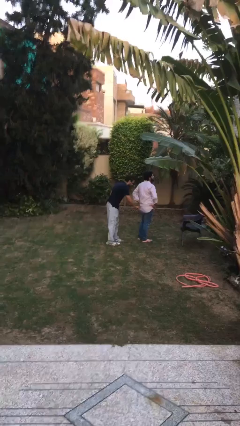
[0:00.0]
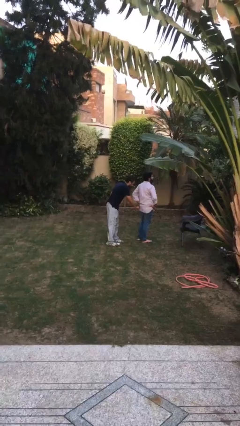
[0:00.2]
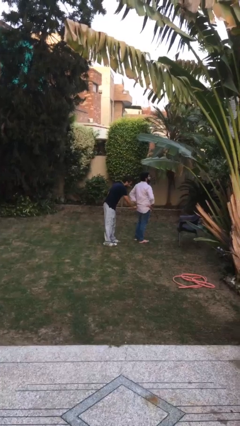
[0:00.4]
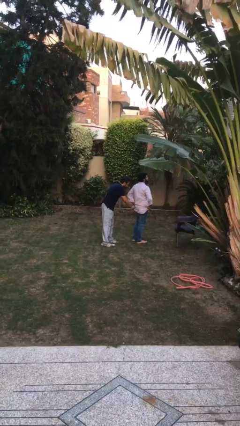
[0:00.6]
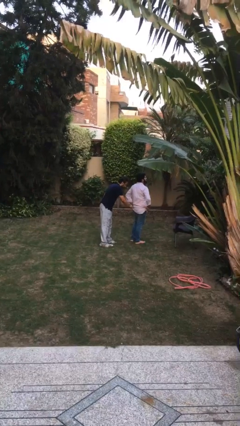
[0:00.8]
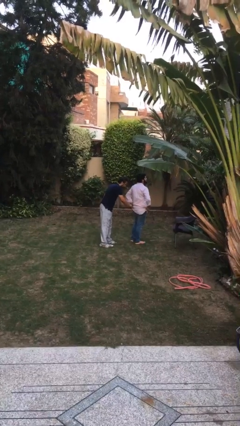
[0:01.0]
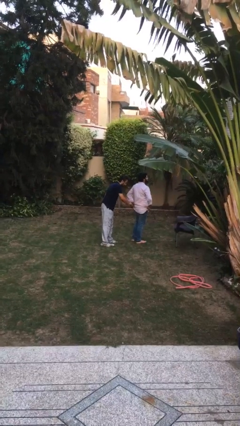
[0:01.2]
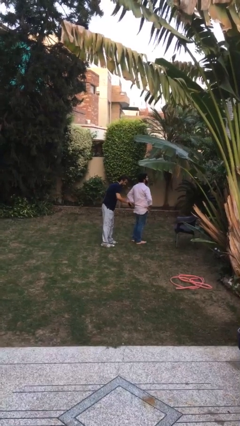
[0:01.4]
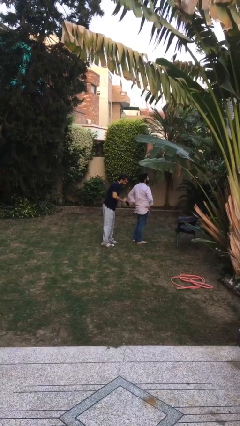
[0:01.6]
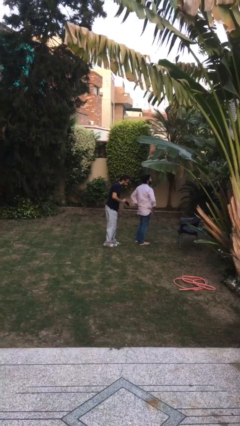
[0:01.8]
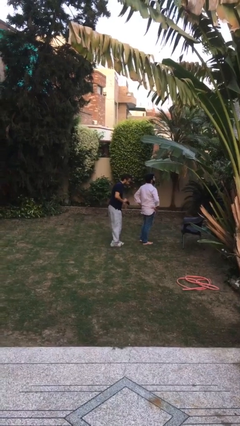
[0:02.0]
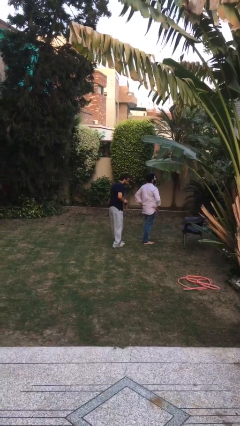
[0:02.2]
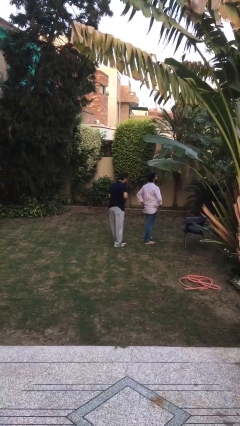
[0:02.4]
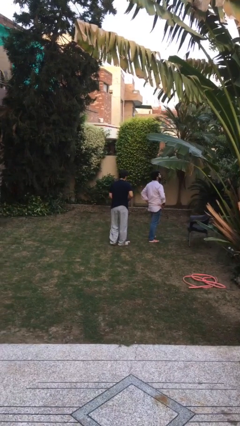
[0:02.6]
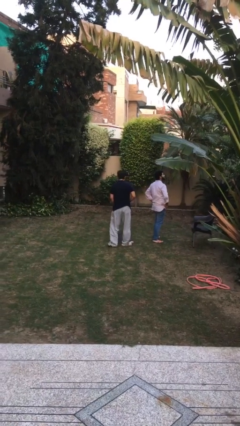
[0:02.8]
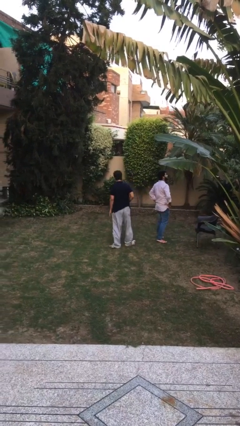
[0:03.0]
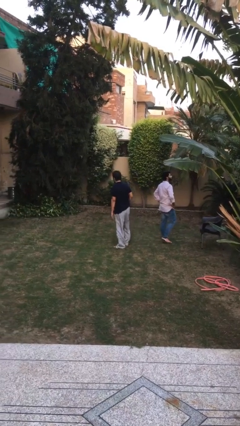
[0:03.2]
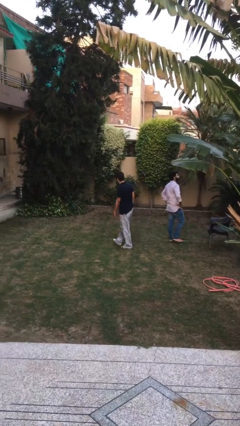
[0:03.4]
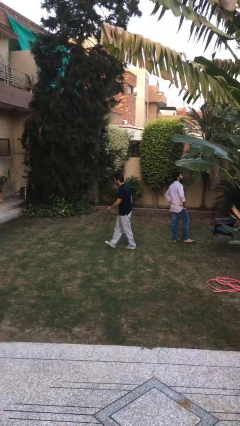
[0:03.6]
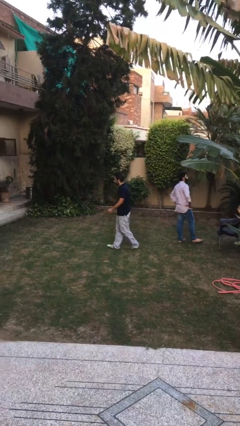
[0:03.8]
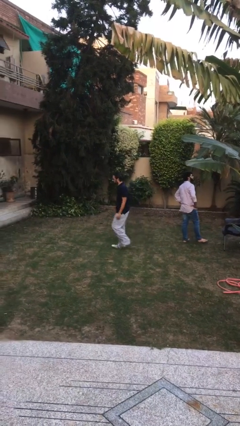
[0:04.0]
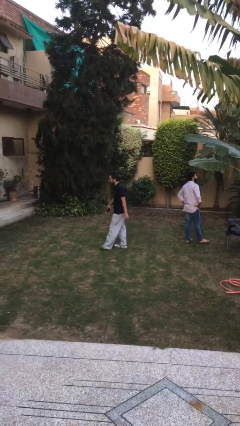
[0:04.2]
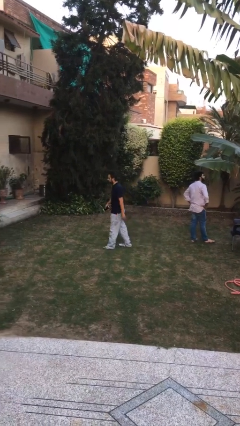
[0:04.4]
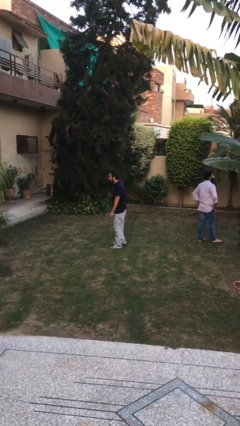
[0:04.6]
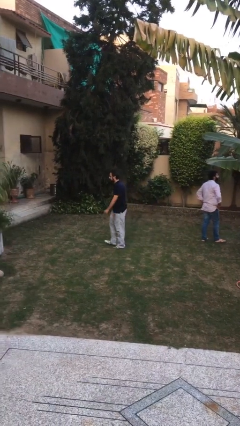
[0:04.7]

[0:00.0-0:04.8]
person steals object from person

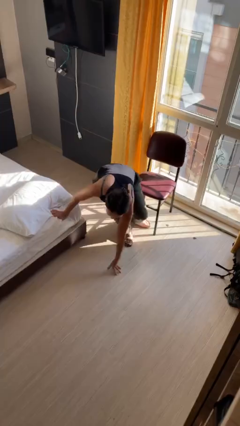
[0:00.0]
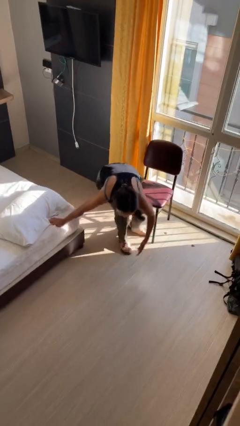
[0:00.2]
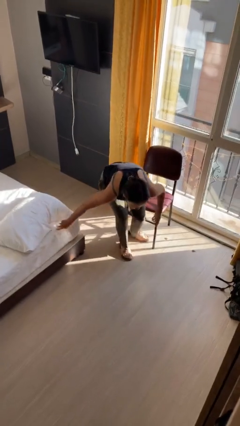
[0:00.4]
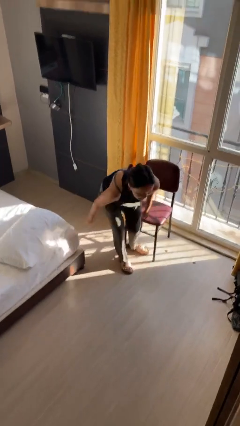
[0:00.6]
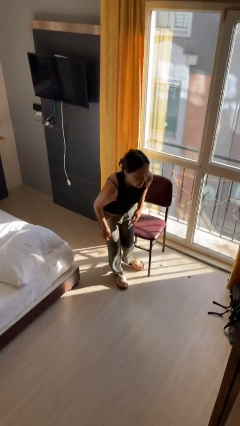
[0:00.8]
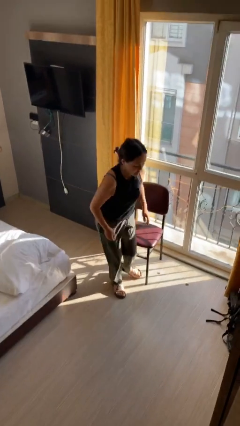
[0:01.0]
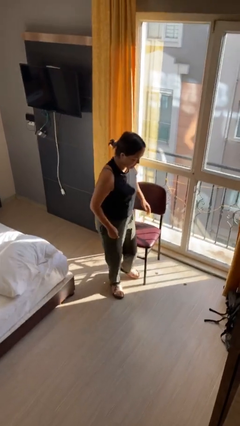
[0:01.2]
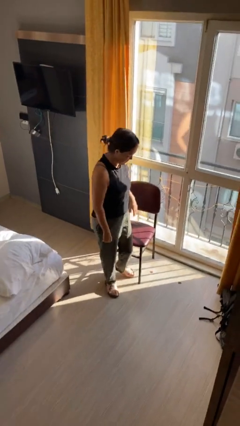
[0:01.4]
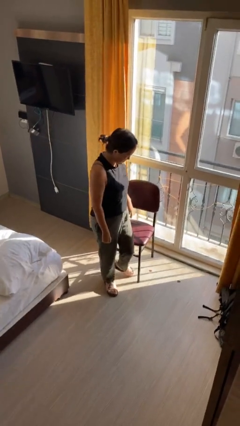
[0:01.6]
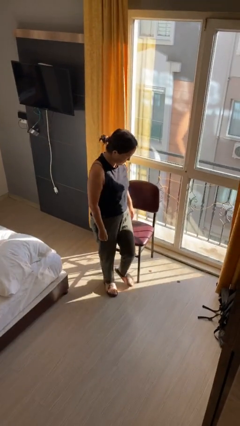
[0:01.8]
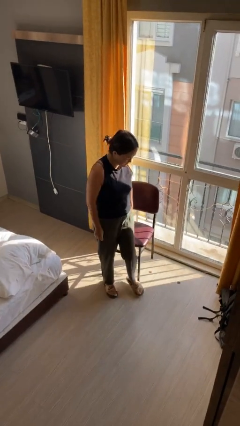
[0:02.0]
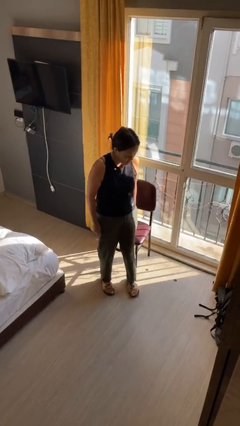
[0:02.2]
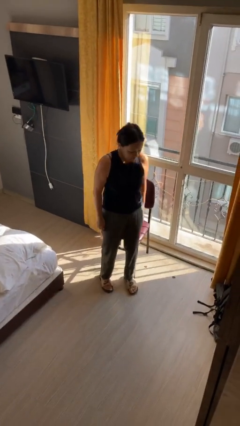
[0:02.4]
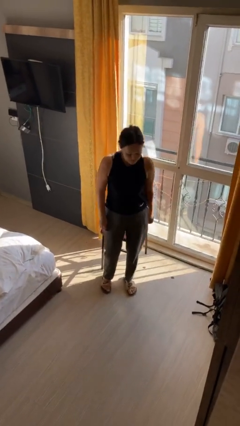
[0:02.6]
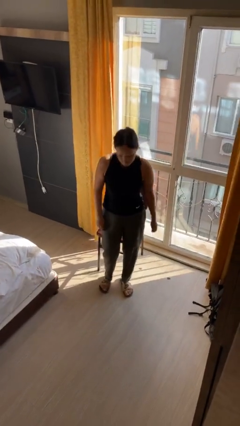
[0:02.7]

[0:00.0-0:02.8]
person stands up from floor

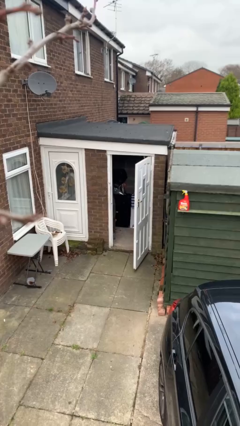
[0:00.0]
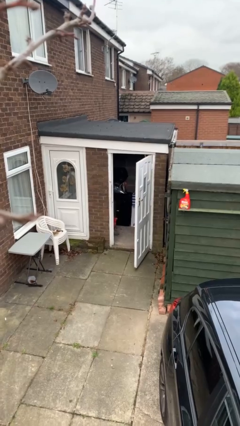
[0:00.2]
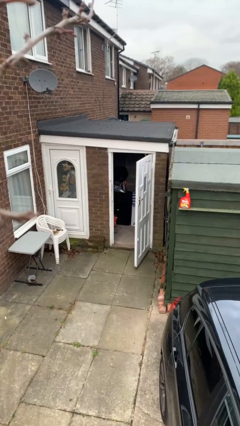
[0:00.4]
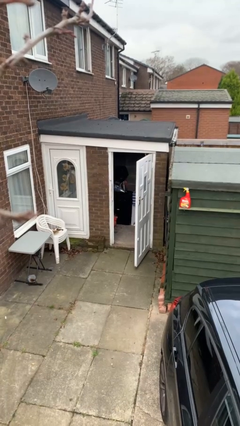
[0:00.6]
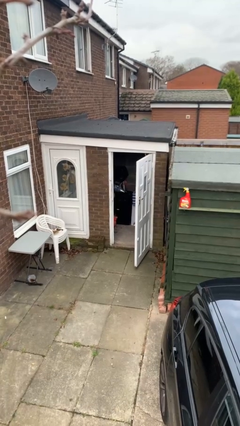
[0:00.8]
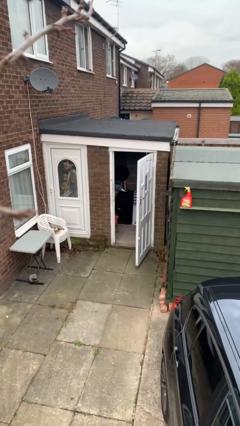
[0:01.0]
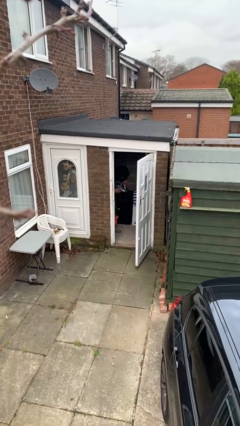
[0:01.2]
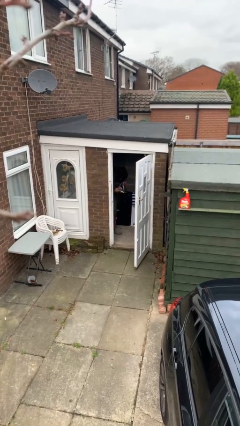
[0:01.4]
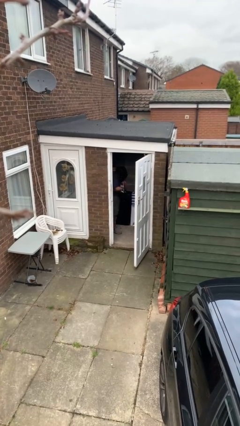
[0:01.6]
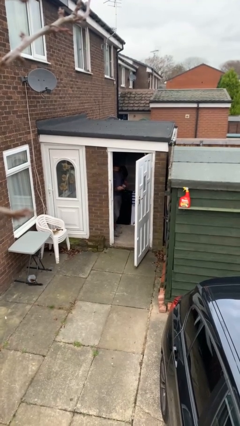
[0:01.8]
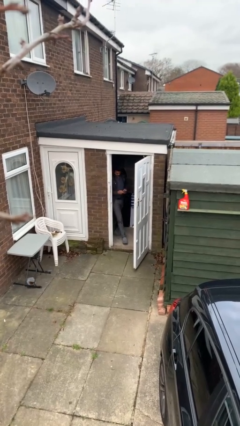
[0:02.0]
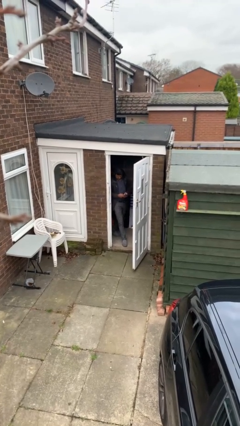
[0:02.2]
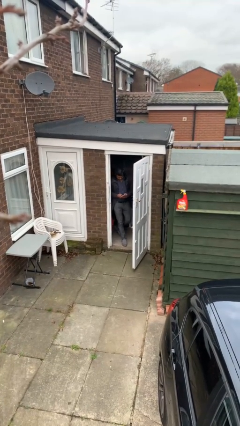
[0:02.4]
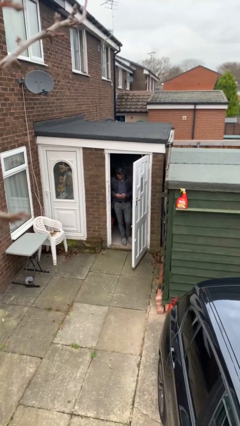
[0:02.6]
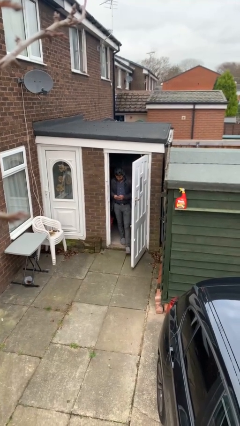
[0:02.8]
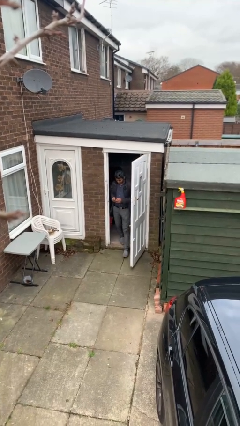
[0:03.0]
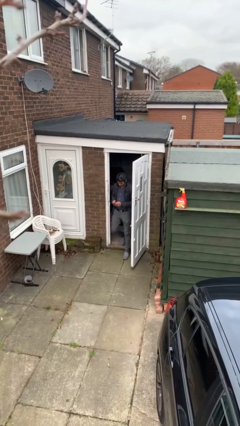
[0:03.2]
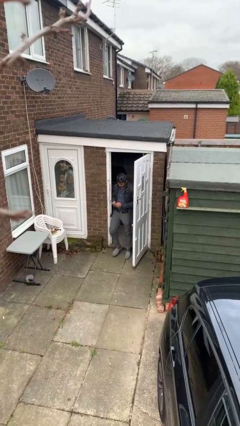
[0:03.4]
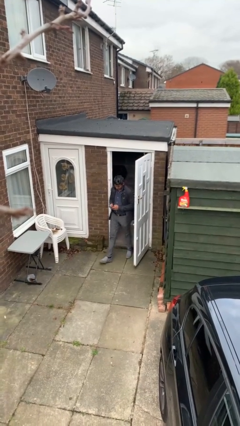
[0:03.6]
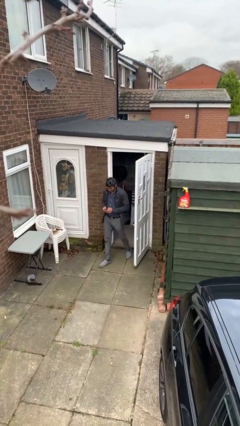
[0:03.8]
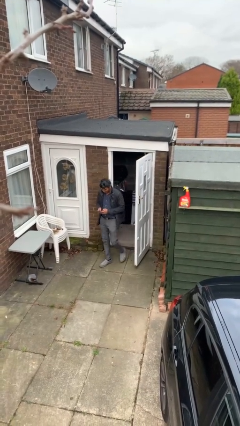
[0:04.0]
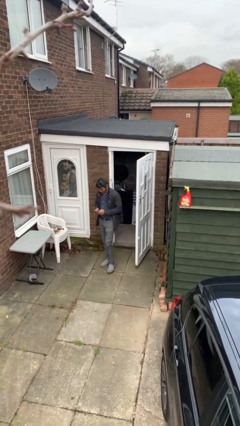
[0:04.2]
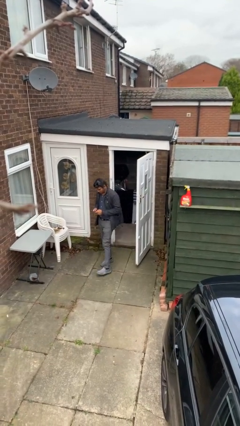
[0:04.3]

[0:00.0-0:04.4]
person enters scene through structure

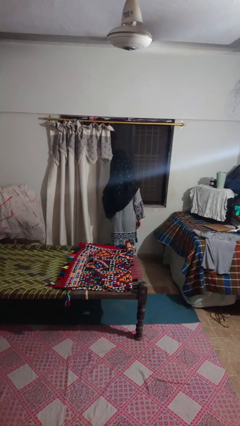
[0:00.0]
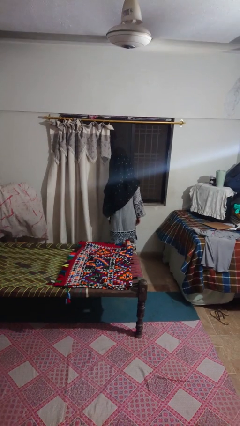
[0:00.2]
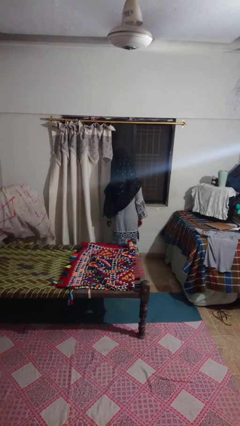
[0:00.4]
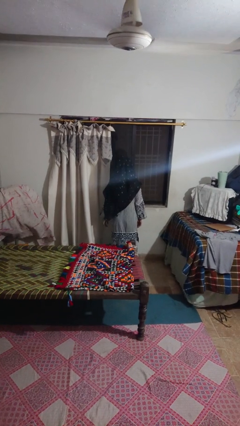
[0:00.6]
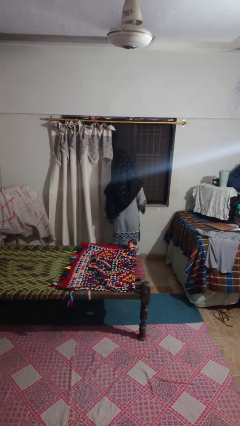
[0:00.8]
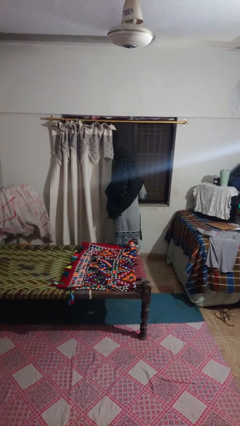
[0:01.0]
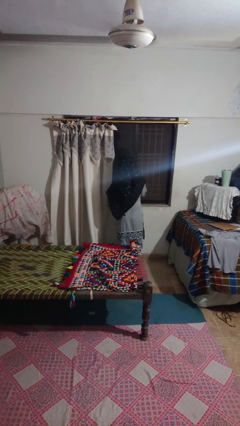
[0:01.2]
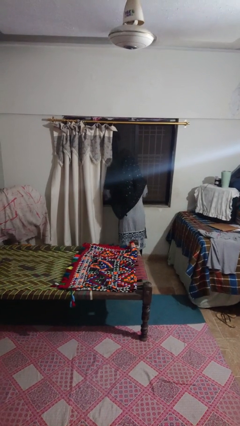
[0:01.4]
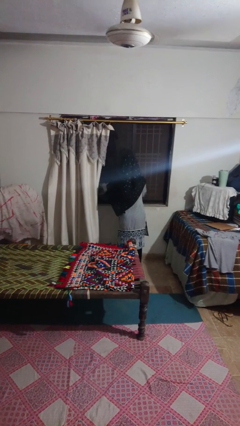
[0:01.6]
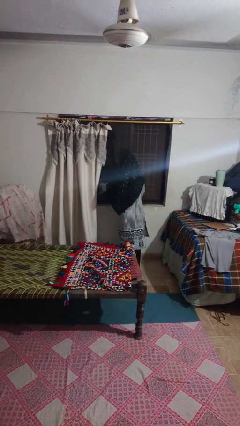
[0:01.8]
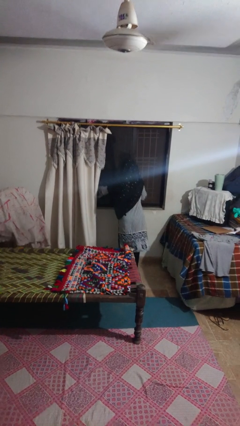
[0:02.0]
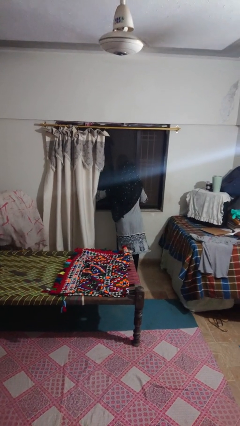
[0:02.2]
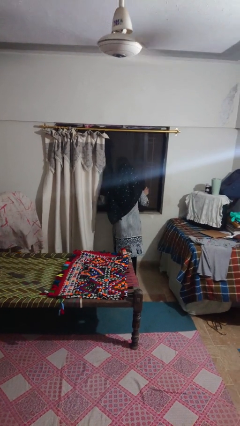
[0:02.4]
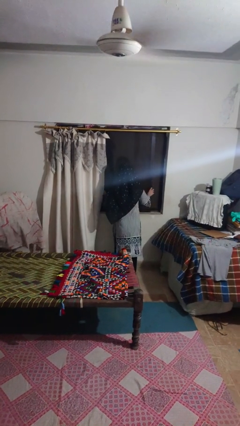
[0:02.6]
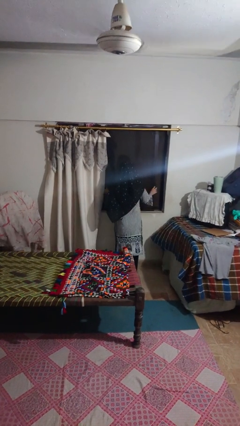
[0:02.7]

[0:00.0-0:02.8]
person closes home window

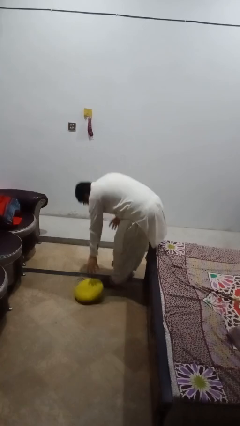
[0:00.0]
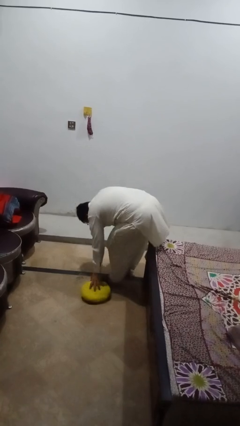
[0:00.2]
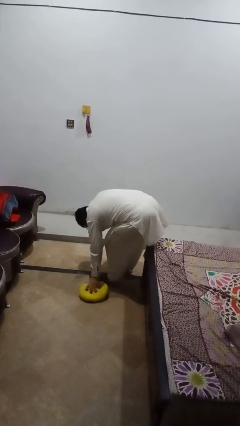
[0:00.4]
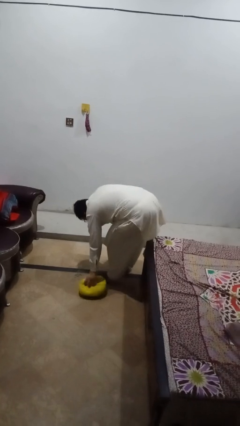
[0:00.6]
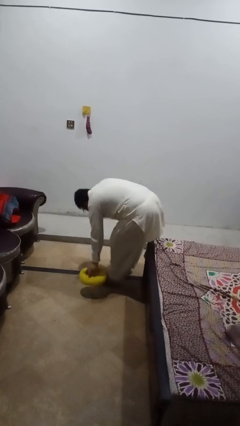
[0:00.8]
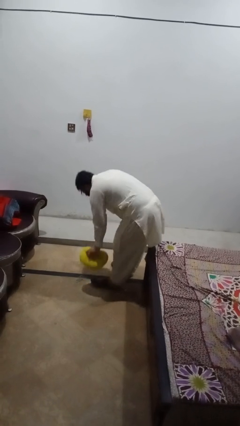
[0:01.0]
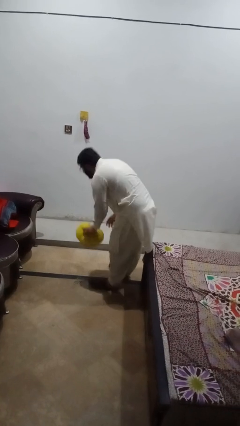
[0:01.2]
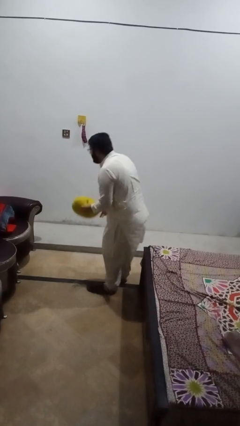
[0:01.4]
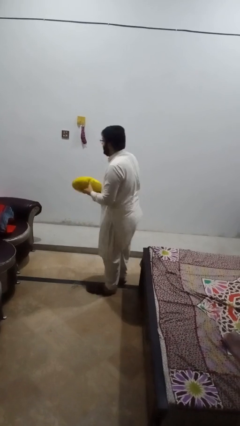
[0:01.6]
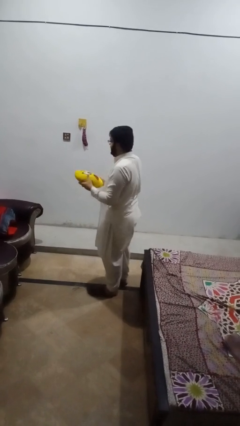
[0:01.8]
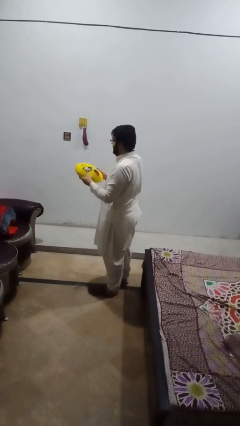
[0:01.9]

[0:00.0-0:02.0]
person picks up object from floor

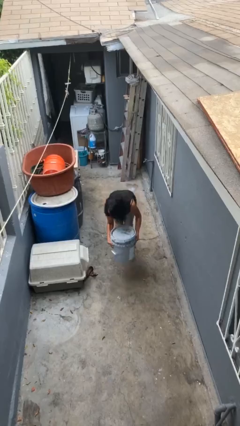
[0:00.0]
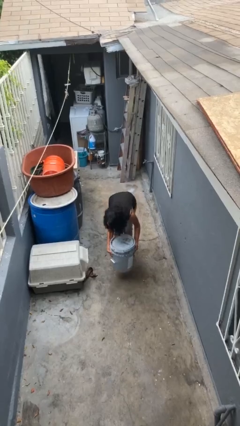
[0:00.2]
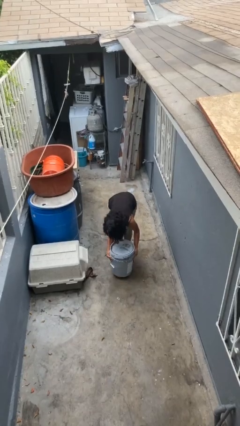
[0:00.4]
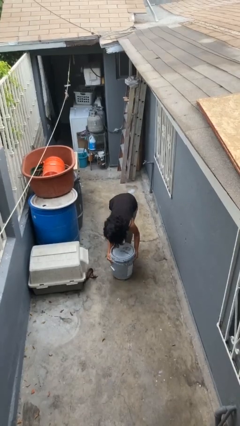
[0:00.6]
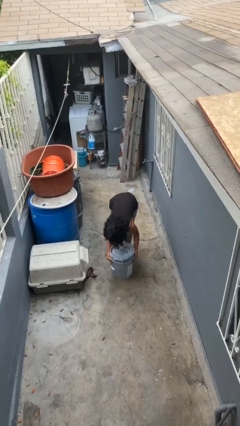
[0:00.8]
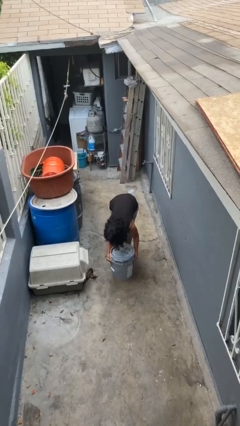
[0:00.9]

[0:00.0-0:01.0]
person puts down object on floor
